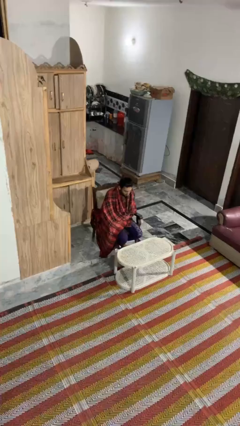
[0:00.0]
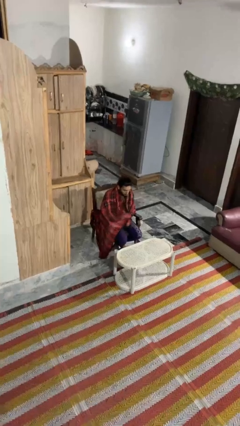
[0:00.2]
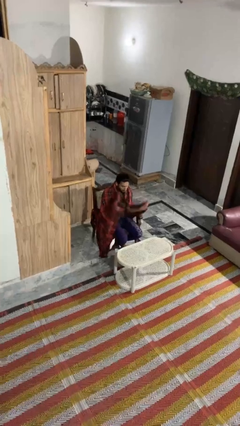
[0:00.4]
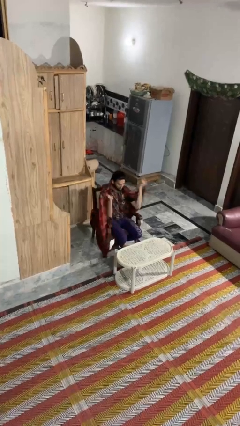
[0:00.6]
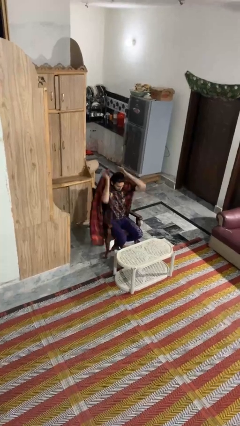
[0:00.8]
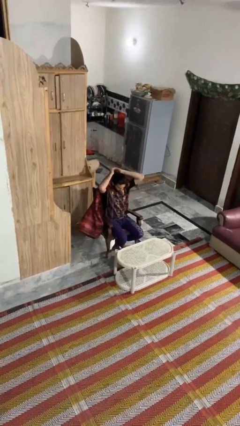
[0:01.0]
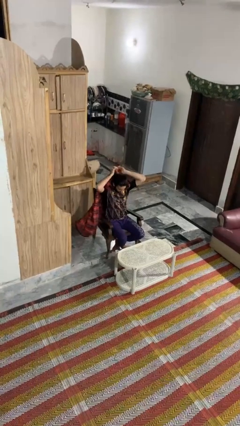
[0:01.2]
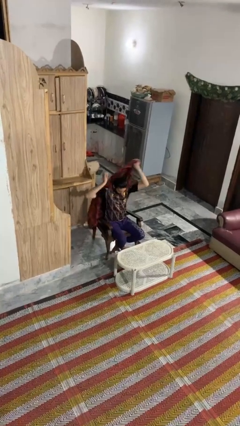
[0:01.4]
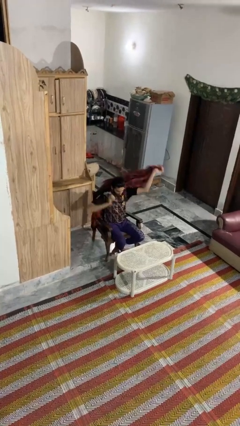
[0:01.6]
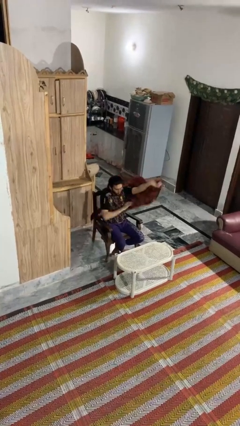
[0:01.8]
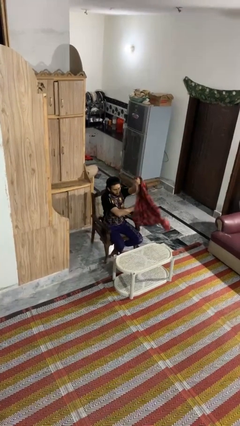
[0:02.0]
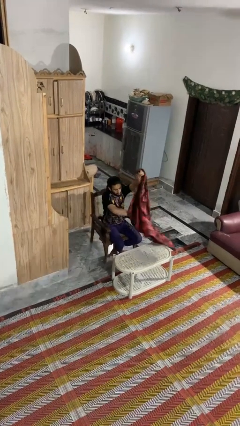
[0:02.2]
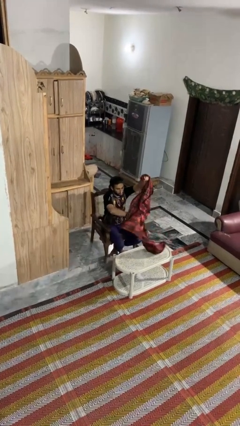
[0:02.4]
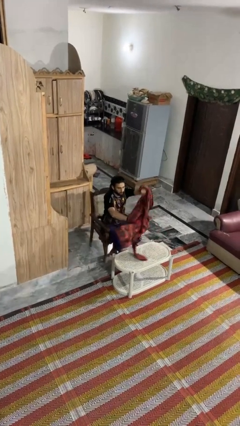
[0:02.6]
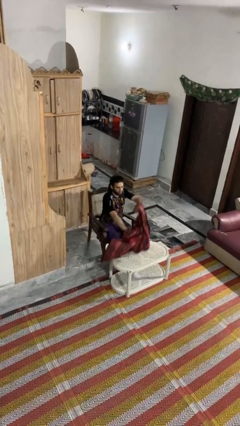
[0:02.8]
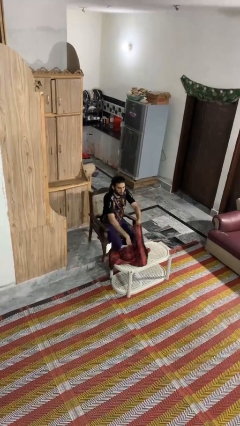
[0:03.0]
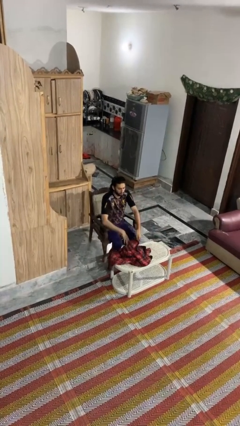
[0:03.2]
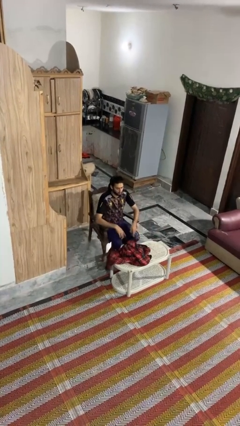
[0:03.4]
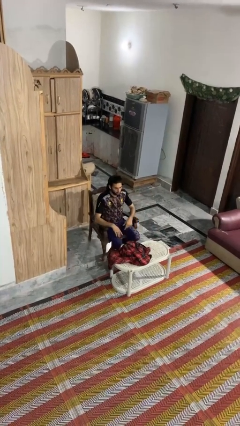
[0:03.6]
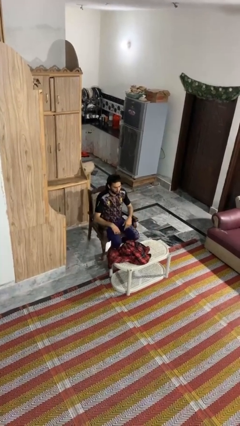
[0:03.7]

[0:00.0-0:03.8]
person uncovers with blanket

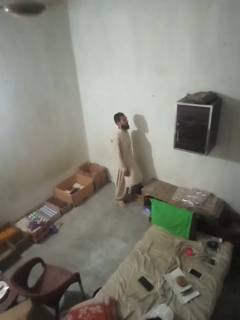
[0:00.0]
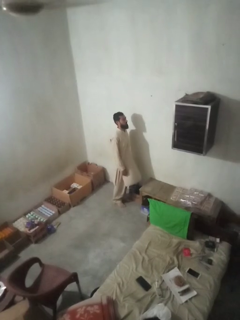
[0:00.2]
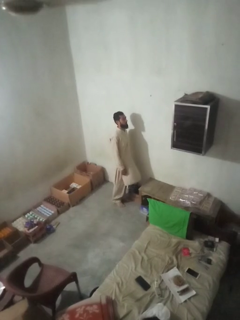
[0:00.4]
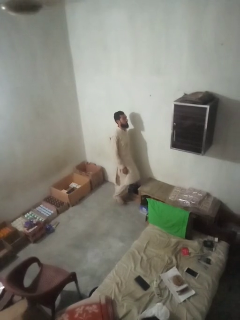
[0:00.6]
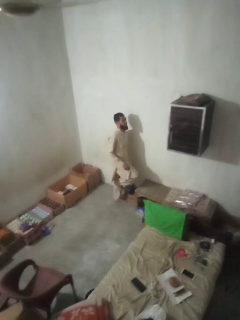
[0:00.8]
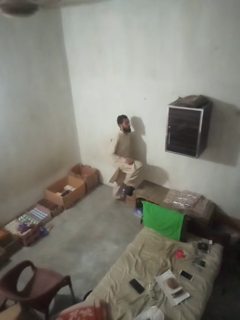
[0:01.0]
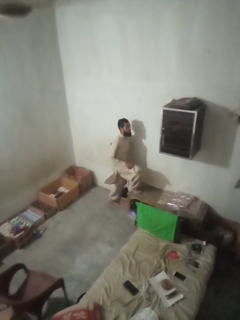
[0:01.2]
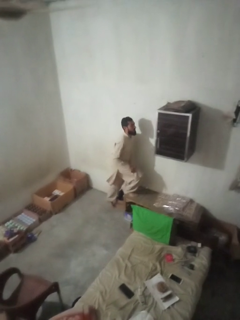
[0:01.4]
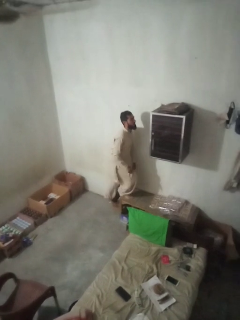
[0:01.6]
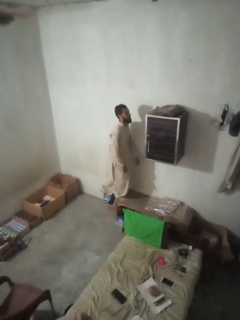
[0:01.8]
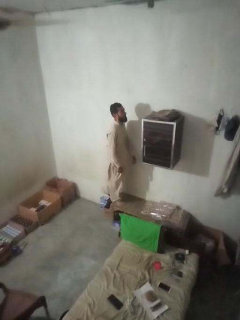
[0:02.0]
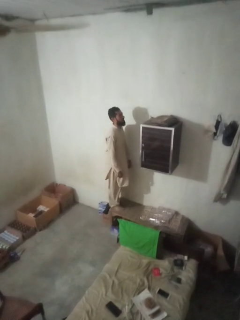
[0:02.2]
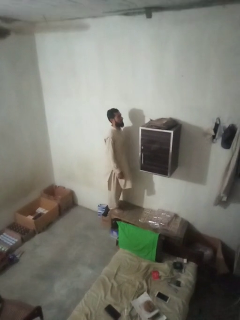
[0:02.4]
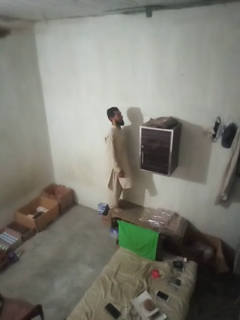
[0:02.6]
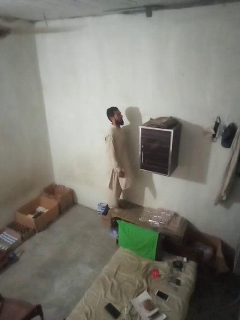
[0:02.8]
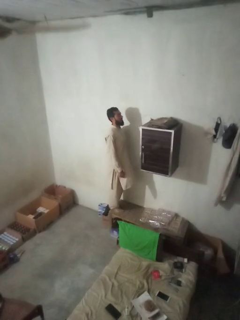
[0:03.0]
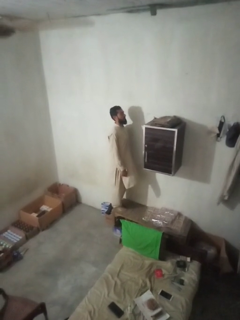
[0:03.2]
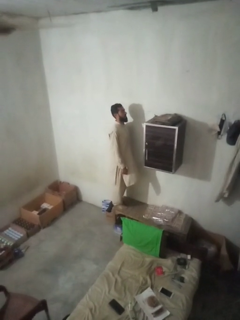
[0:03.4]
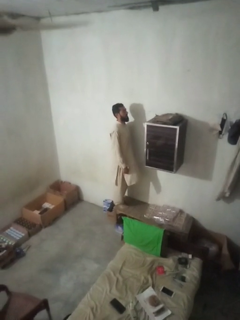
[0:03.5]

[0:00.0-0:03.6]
person climbs on table

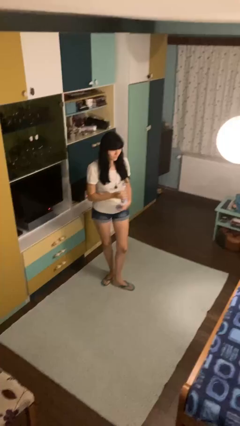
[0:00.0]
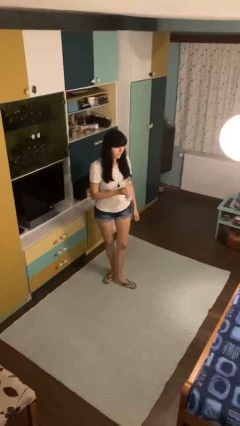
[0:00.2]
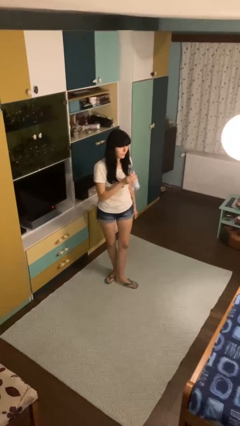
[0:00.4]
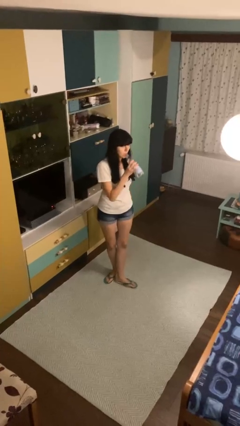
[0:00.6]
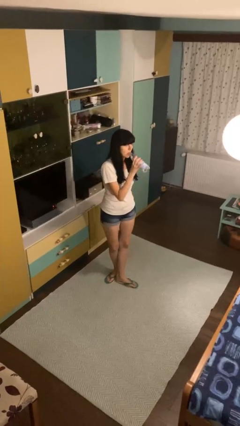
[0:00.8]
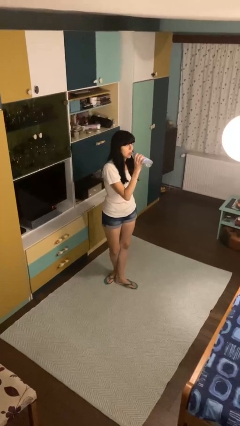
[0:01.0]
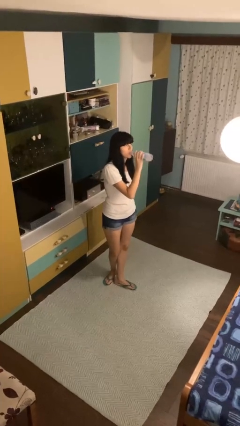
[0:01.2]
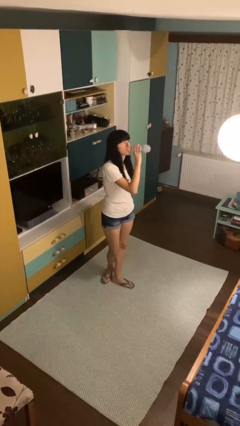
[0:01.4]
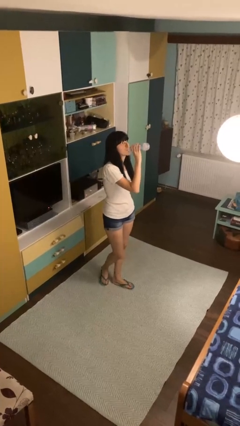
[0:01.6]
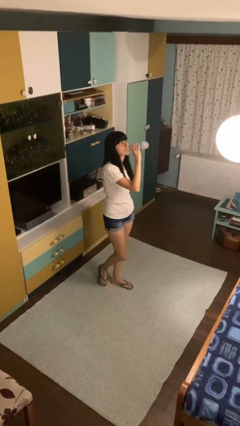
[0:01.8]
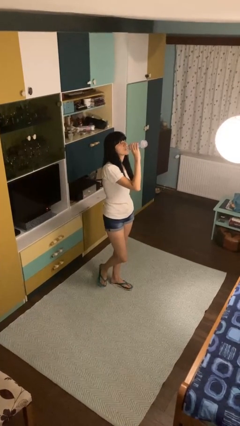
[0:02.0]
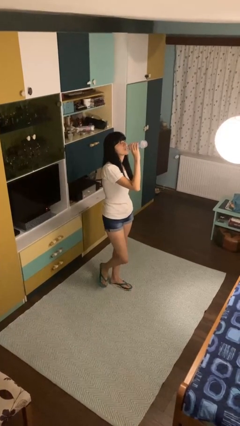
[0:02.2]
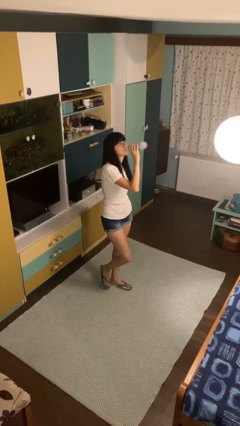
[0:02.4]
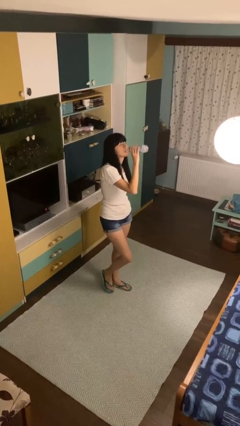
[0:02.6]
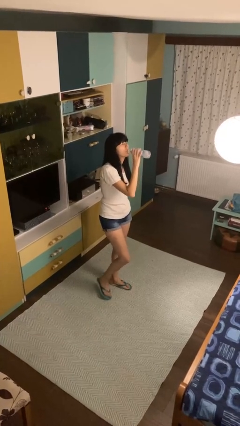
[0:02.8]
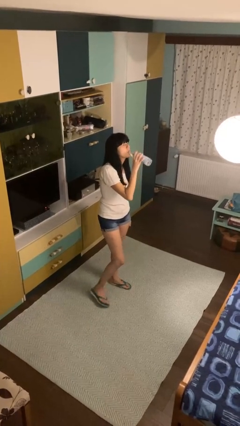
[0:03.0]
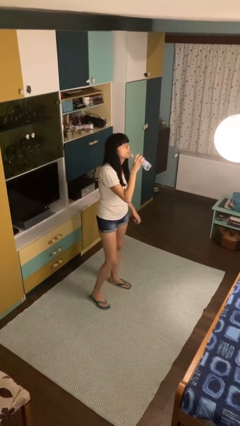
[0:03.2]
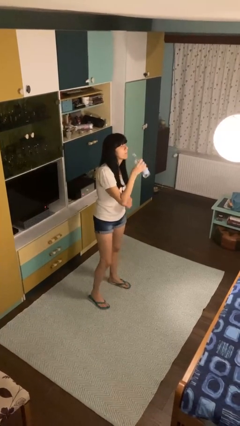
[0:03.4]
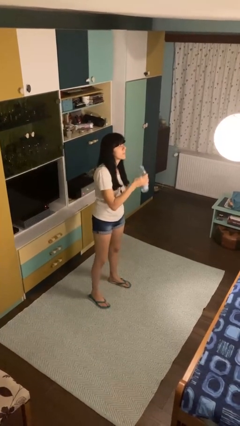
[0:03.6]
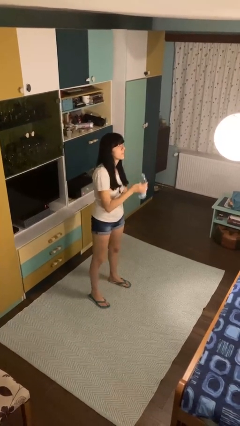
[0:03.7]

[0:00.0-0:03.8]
person drinks from bottle

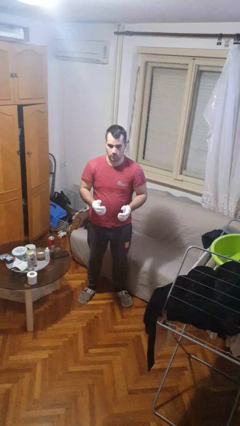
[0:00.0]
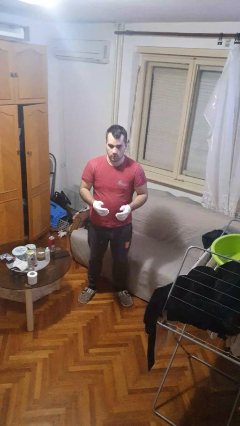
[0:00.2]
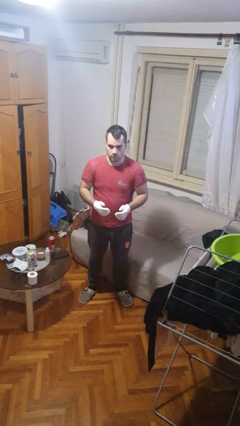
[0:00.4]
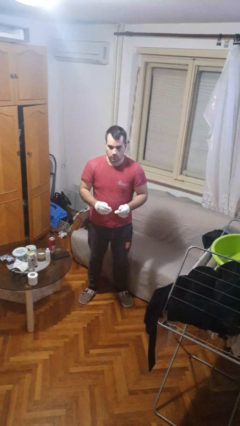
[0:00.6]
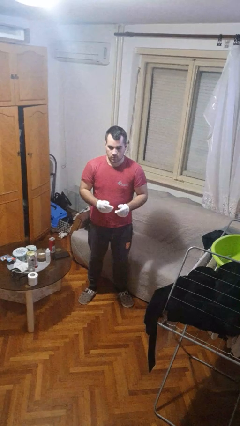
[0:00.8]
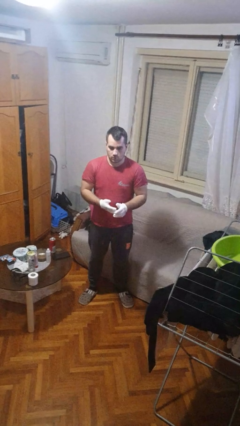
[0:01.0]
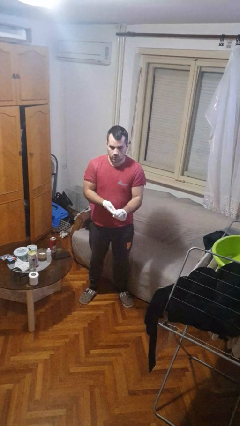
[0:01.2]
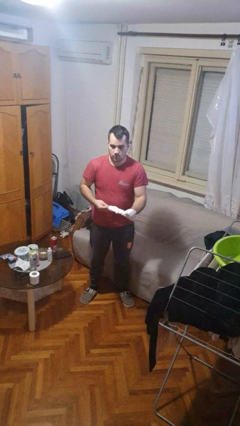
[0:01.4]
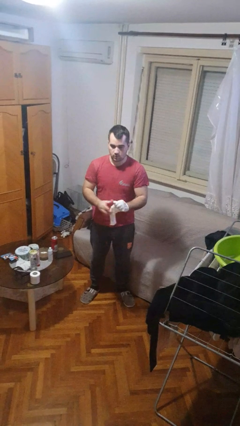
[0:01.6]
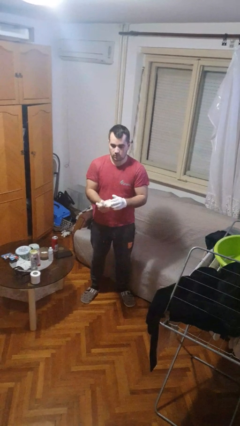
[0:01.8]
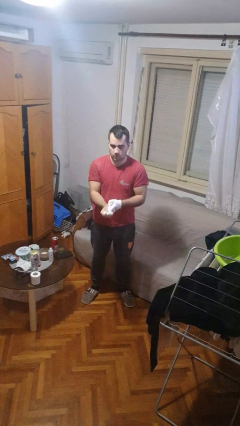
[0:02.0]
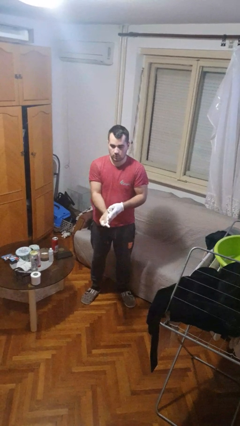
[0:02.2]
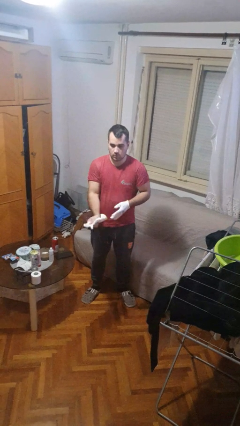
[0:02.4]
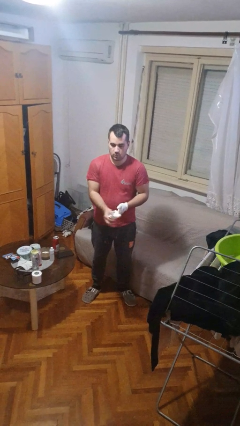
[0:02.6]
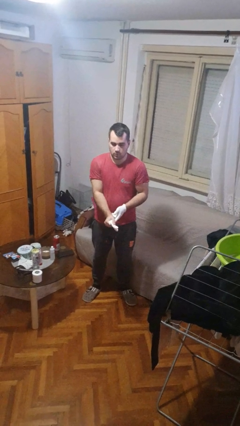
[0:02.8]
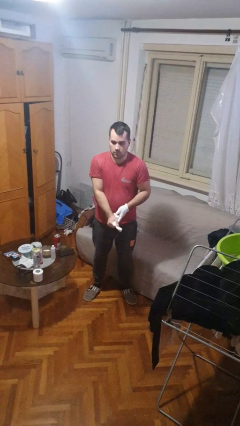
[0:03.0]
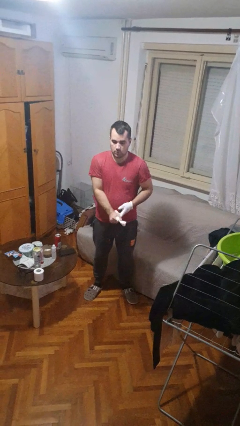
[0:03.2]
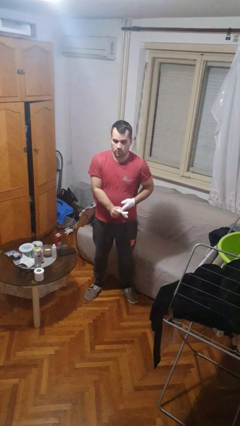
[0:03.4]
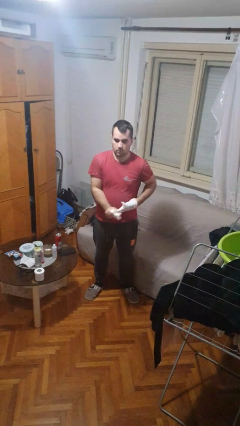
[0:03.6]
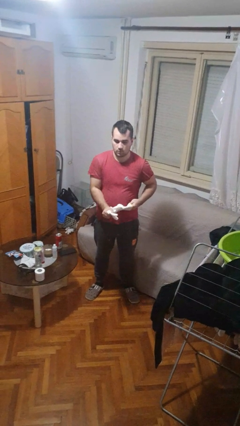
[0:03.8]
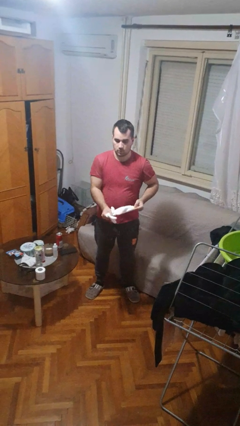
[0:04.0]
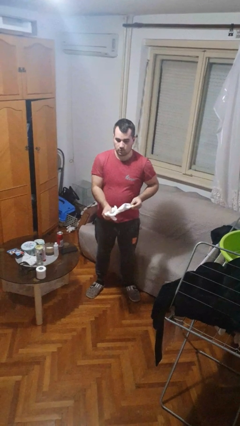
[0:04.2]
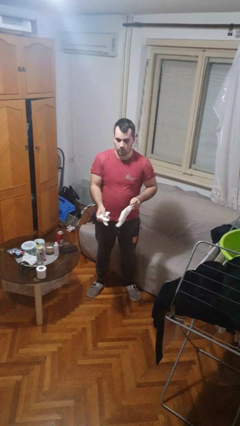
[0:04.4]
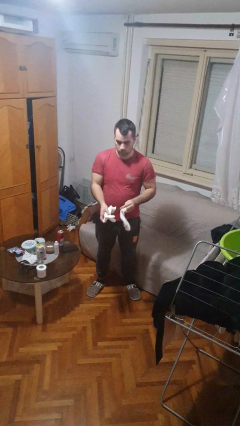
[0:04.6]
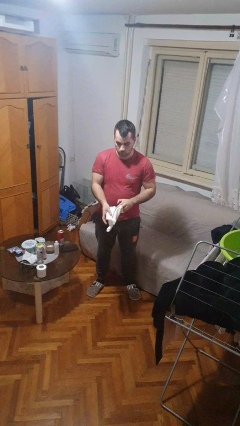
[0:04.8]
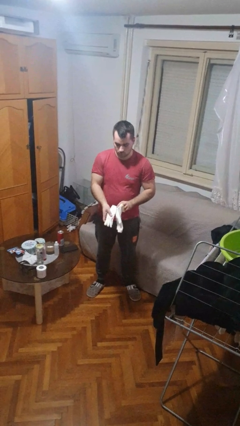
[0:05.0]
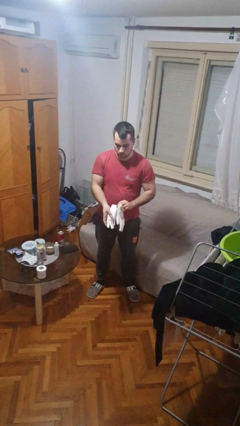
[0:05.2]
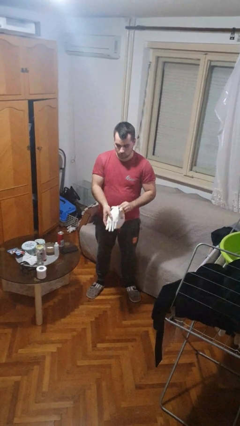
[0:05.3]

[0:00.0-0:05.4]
person takes off gloves

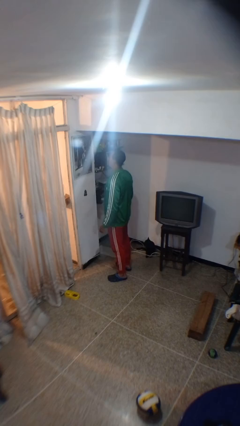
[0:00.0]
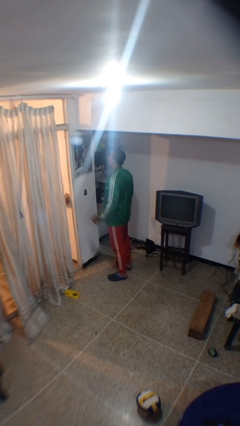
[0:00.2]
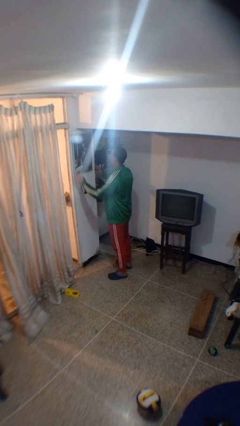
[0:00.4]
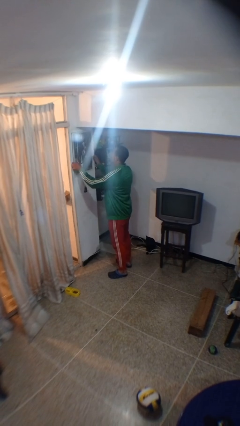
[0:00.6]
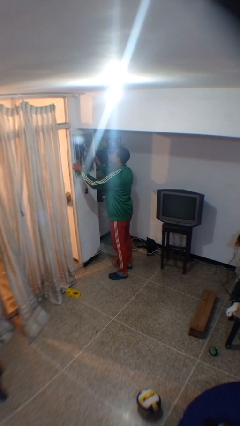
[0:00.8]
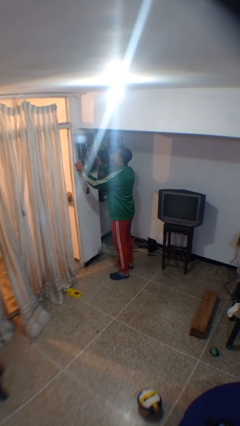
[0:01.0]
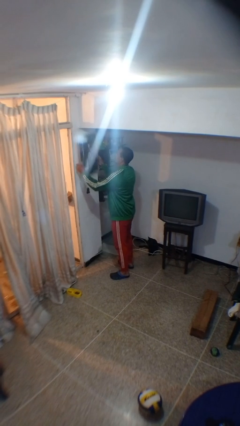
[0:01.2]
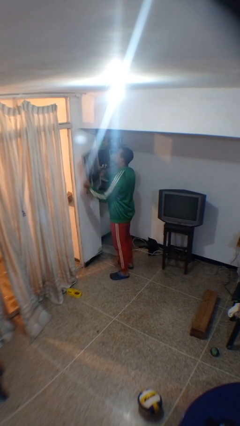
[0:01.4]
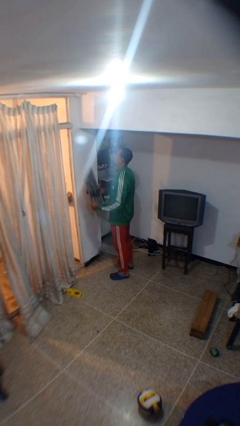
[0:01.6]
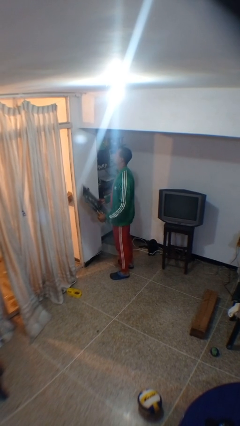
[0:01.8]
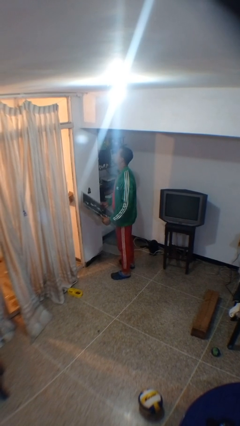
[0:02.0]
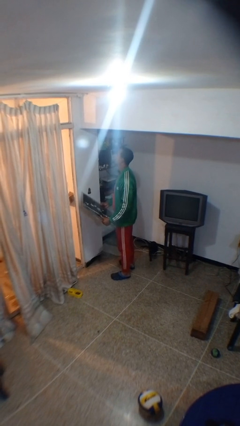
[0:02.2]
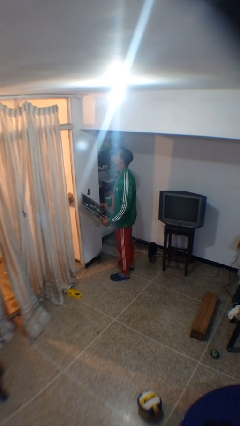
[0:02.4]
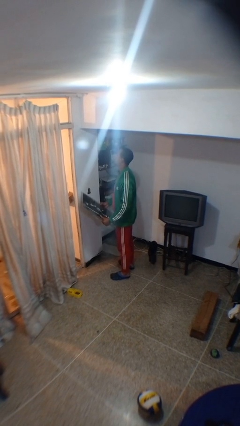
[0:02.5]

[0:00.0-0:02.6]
person takes down picture frame
